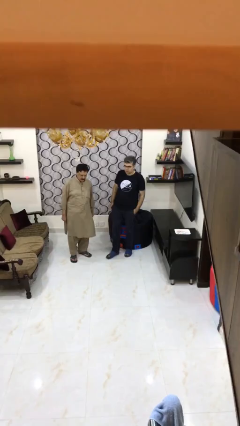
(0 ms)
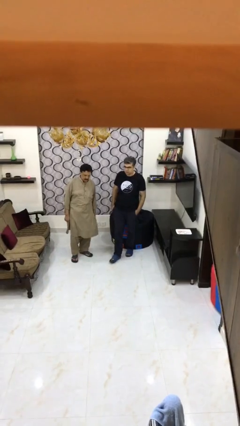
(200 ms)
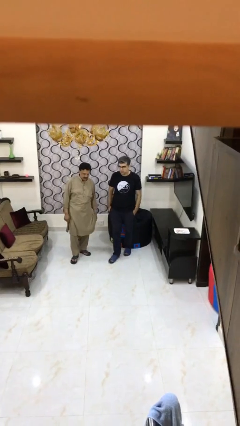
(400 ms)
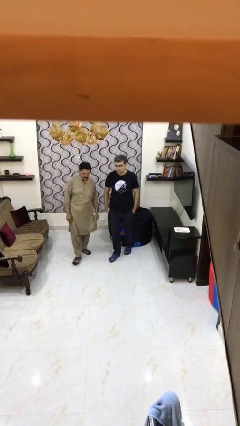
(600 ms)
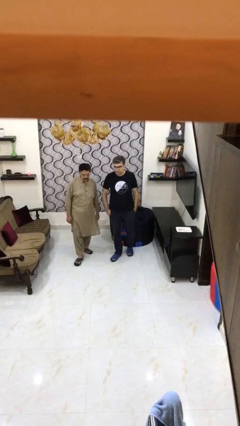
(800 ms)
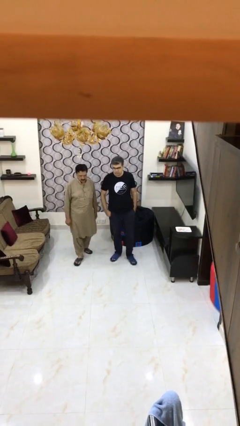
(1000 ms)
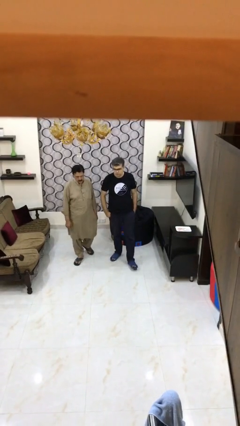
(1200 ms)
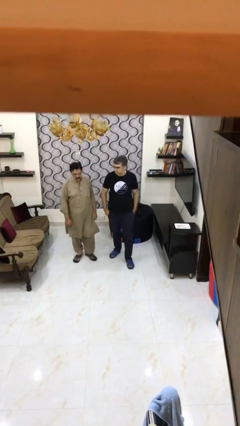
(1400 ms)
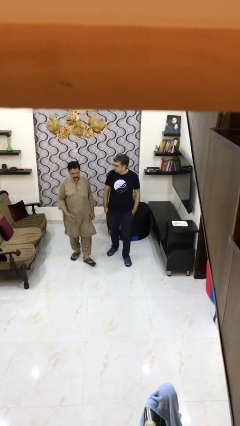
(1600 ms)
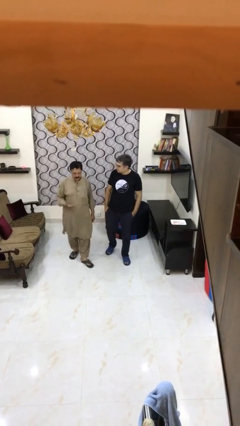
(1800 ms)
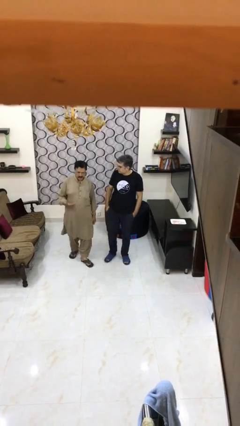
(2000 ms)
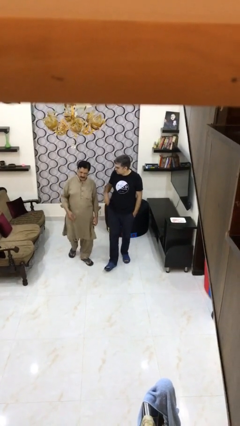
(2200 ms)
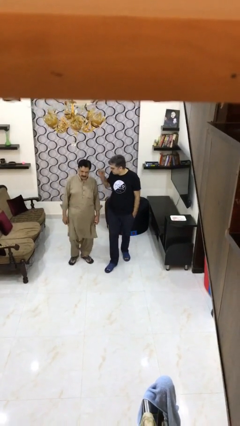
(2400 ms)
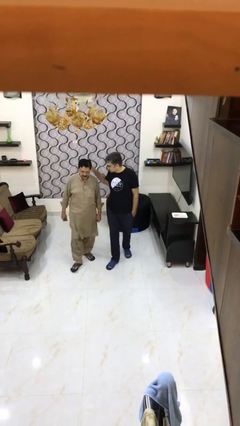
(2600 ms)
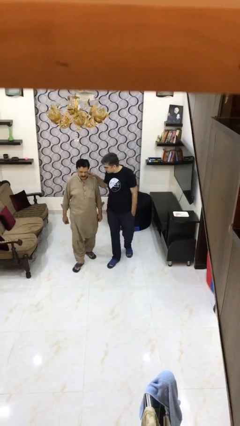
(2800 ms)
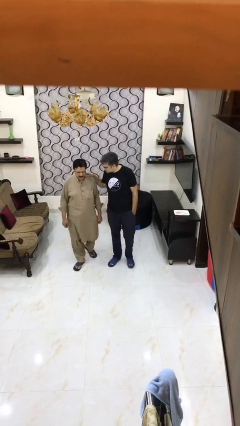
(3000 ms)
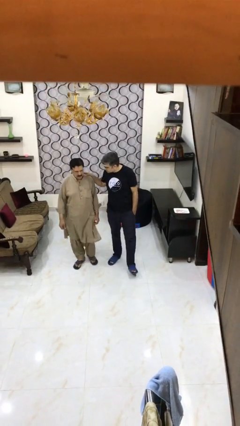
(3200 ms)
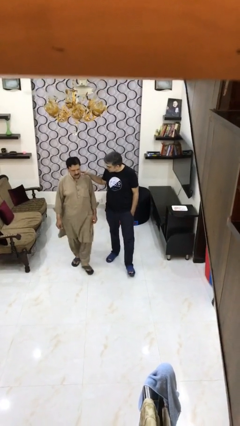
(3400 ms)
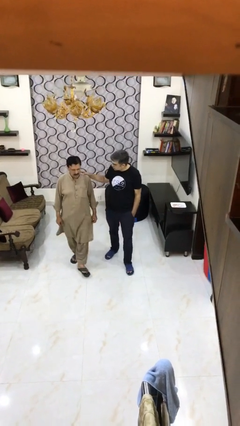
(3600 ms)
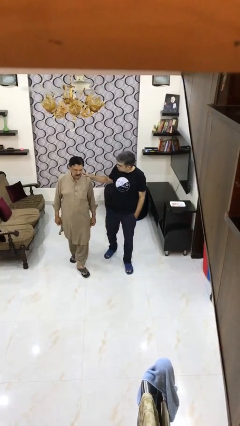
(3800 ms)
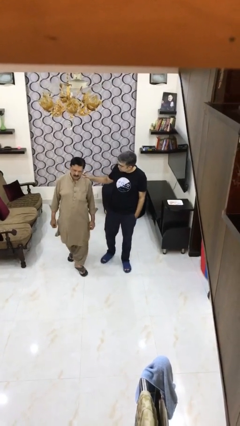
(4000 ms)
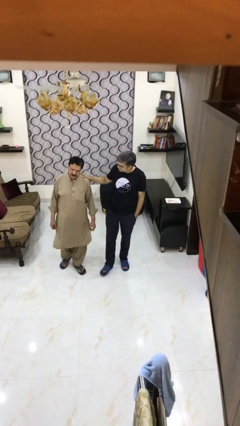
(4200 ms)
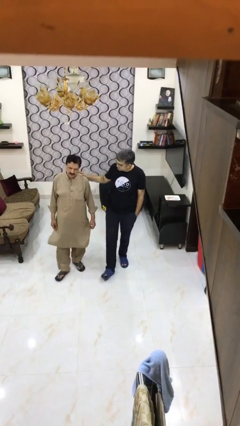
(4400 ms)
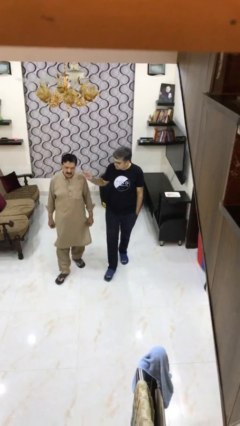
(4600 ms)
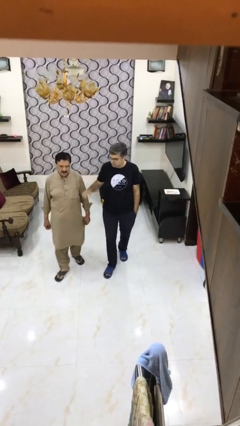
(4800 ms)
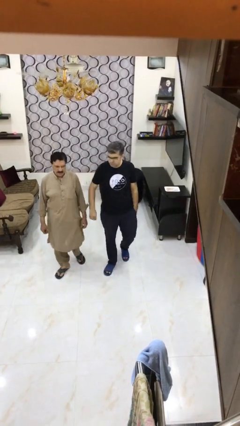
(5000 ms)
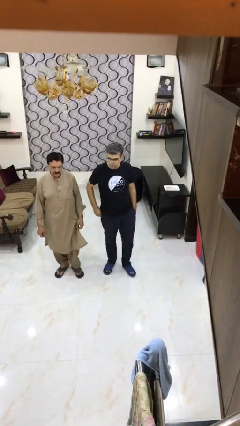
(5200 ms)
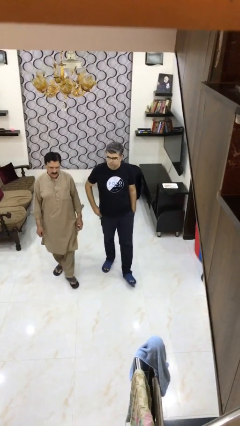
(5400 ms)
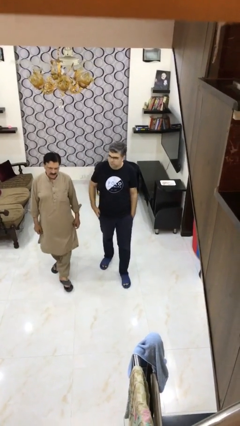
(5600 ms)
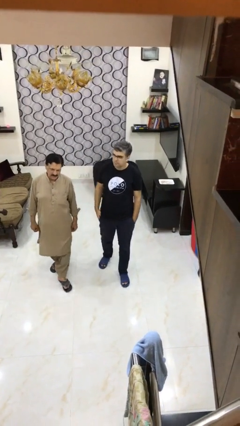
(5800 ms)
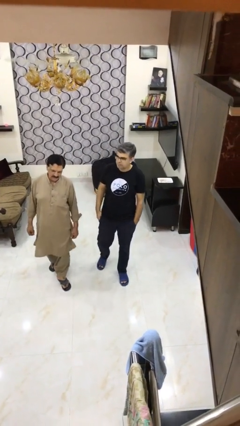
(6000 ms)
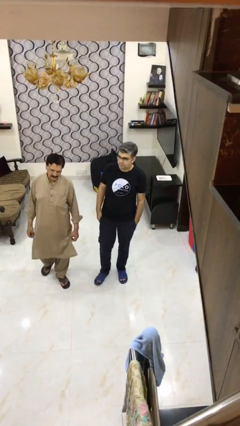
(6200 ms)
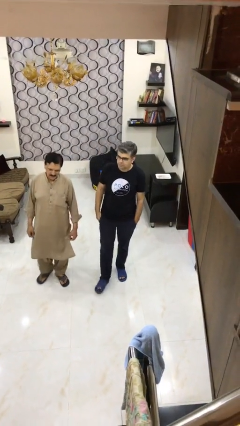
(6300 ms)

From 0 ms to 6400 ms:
person talks to person

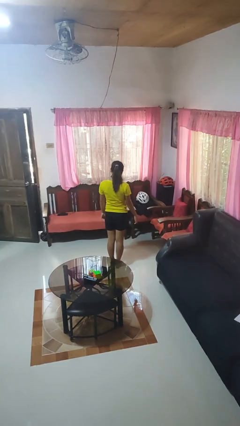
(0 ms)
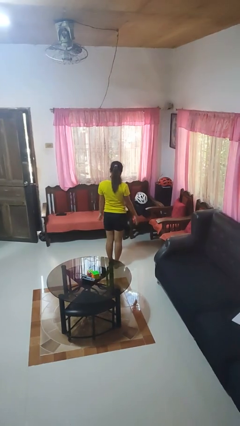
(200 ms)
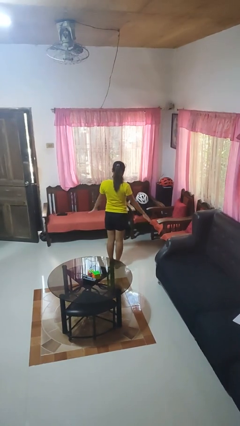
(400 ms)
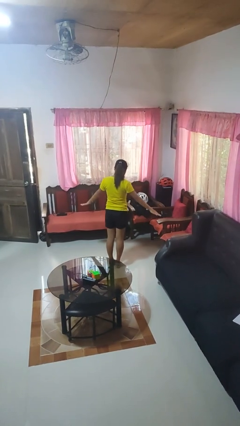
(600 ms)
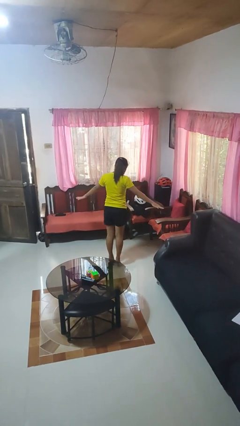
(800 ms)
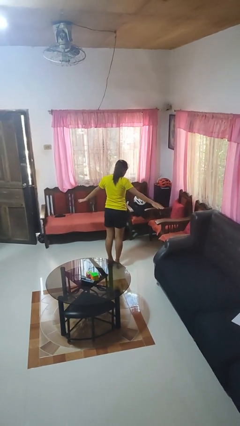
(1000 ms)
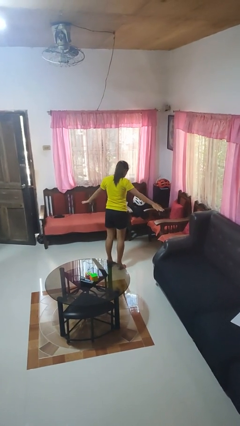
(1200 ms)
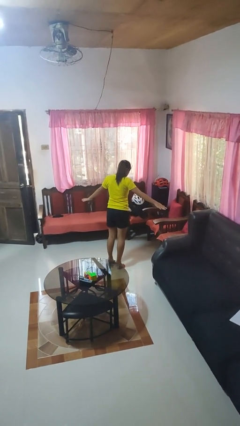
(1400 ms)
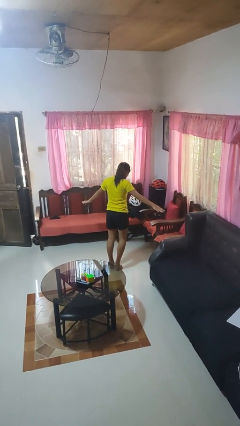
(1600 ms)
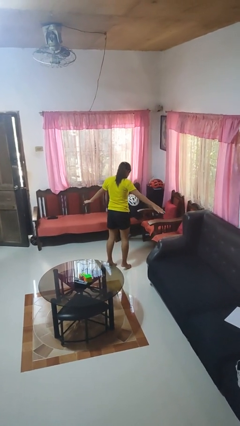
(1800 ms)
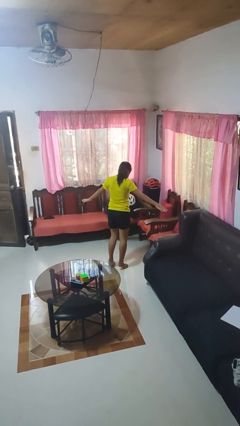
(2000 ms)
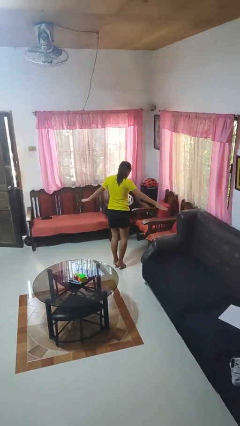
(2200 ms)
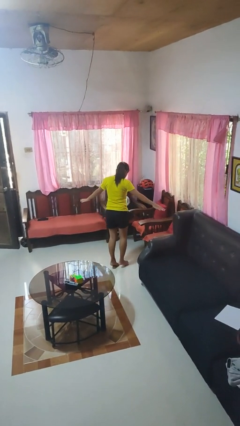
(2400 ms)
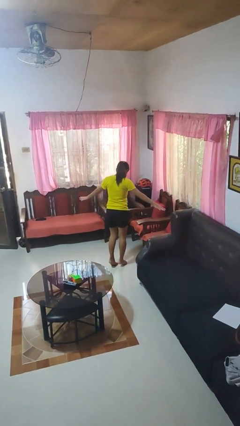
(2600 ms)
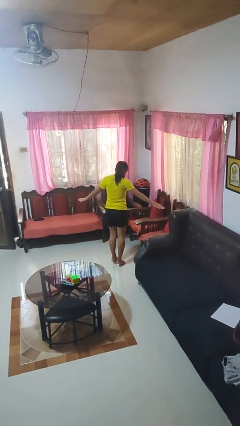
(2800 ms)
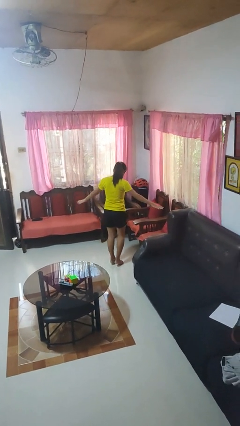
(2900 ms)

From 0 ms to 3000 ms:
person walks tiptoe

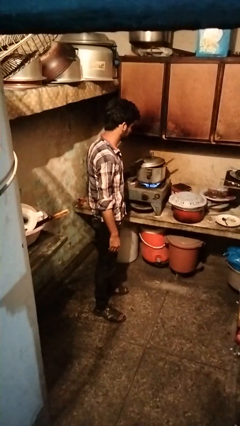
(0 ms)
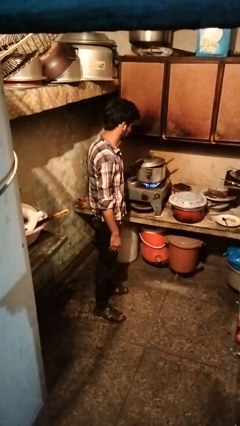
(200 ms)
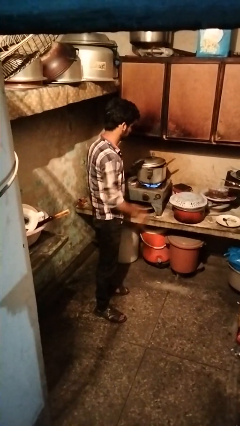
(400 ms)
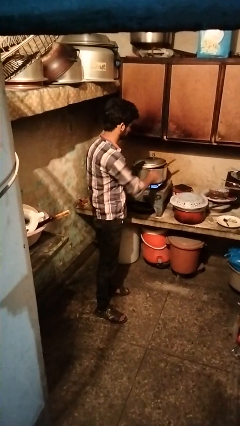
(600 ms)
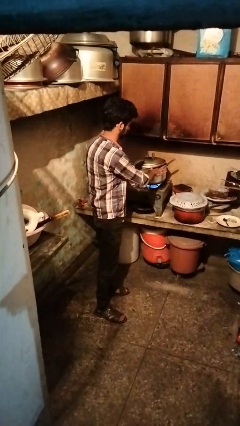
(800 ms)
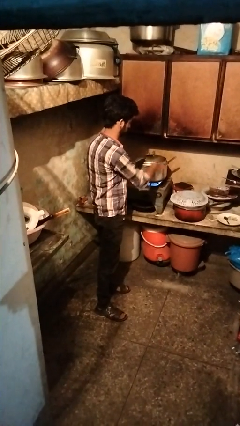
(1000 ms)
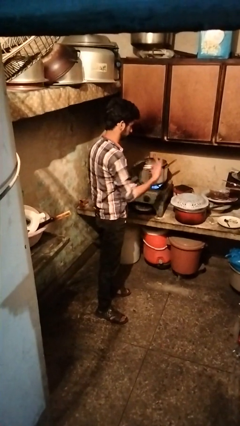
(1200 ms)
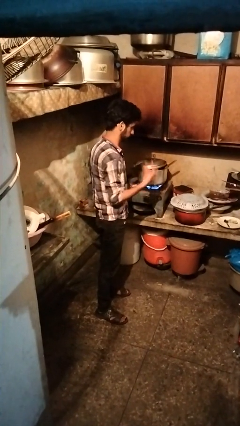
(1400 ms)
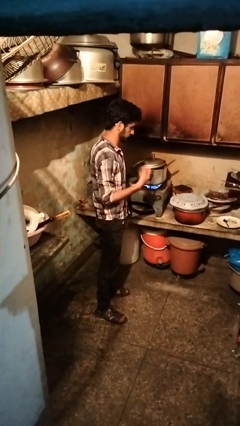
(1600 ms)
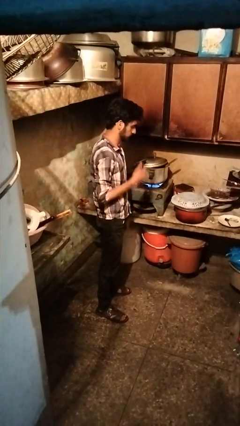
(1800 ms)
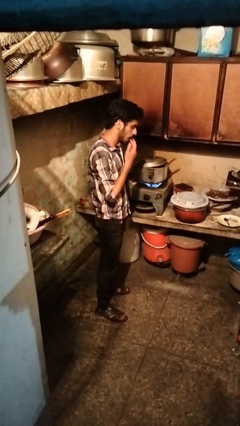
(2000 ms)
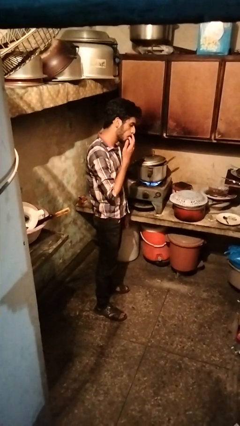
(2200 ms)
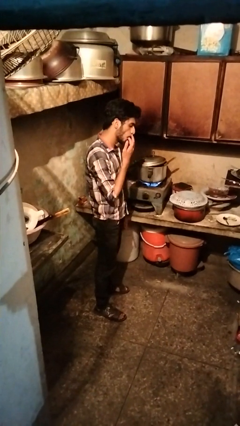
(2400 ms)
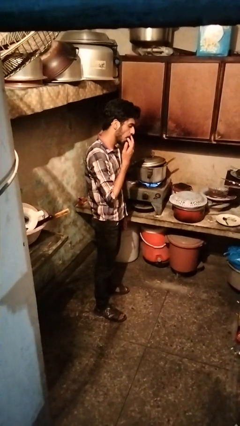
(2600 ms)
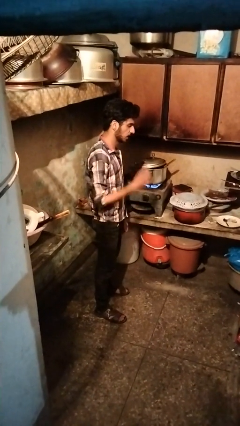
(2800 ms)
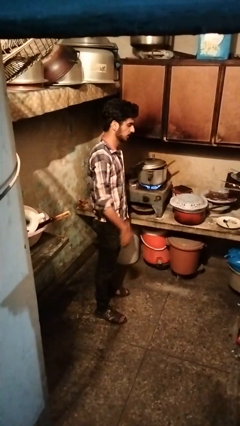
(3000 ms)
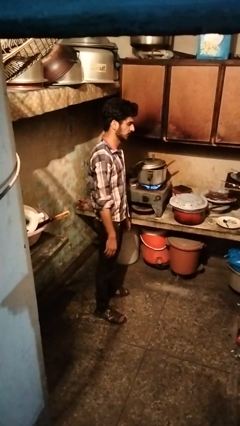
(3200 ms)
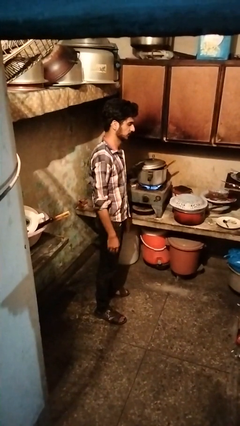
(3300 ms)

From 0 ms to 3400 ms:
person burns hand

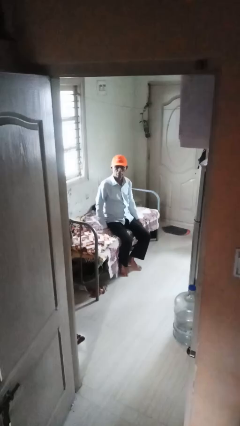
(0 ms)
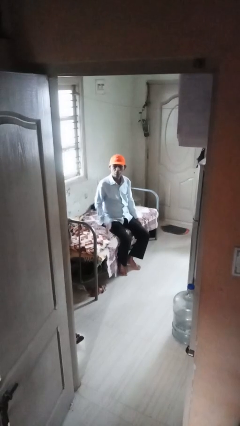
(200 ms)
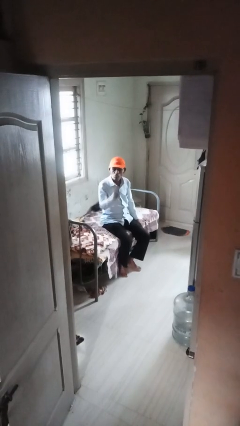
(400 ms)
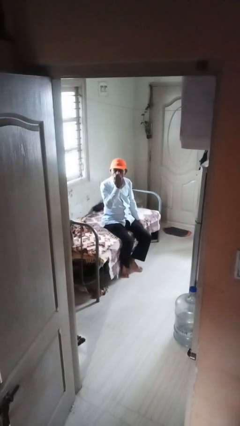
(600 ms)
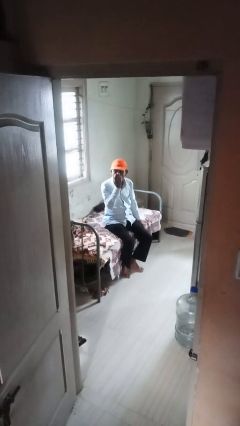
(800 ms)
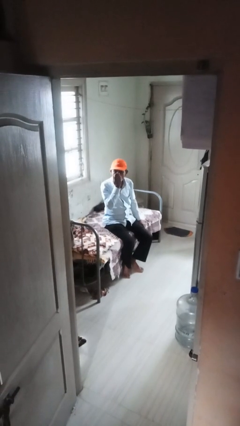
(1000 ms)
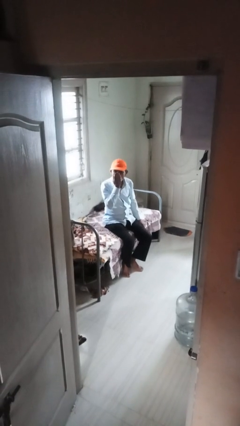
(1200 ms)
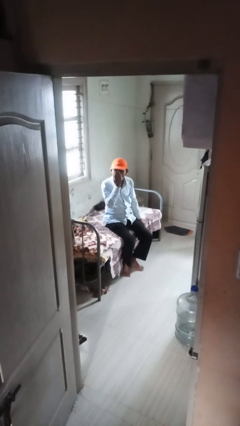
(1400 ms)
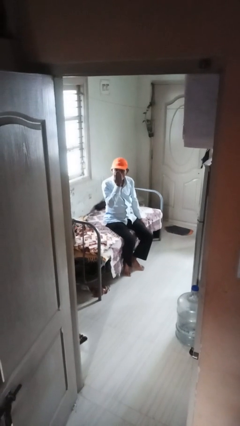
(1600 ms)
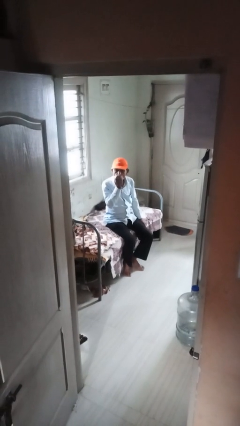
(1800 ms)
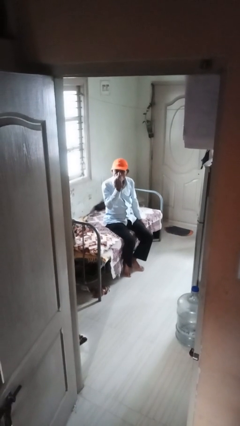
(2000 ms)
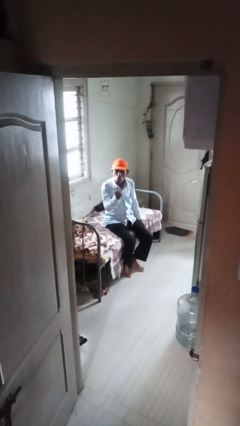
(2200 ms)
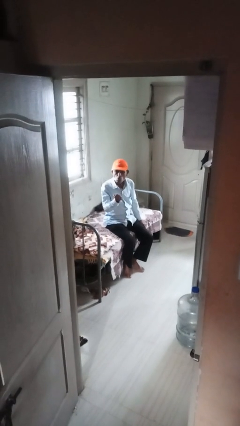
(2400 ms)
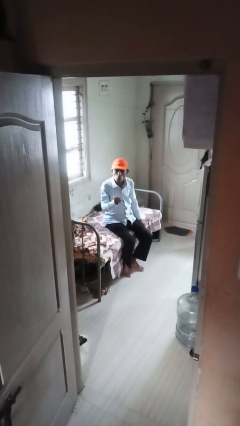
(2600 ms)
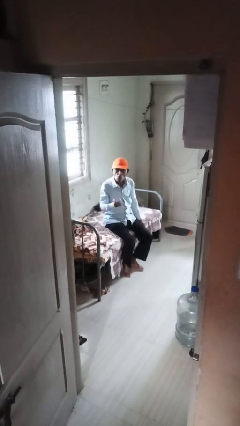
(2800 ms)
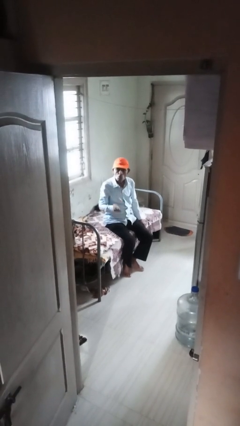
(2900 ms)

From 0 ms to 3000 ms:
person gestures blow kiss

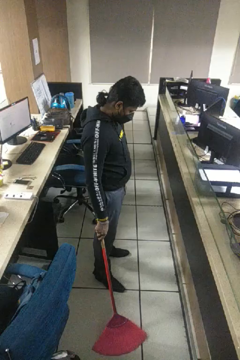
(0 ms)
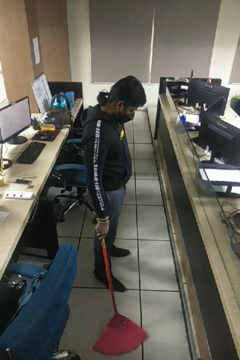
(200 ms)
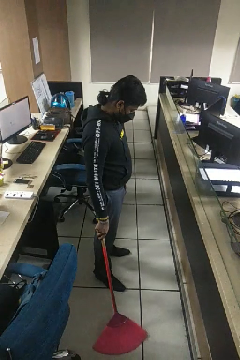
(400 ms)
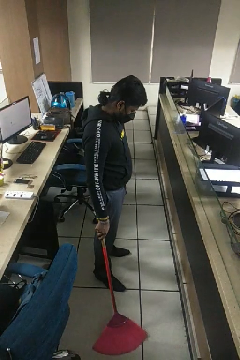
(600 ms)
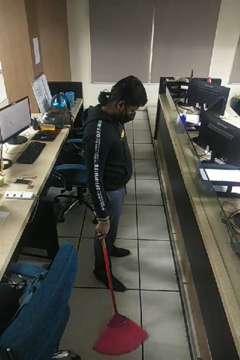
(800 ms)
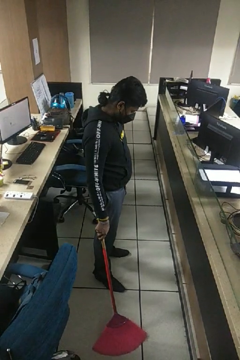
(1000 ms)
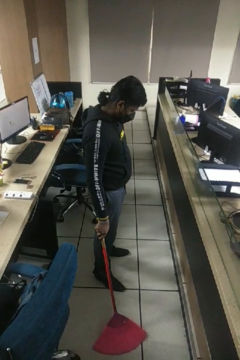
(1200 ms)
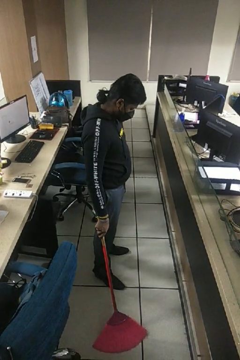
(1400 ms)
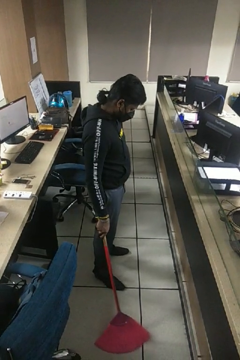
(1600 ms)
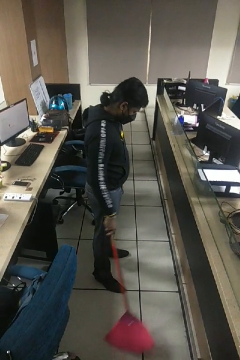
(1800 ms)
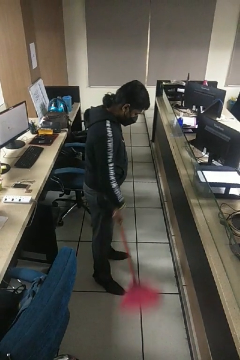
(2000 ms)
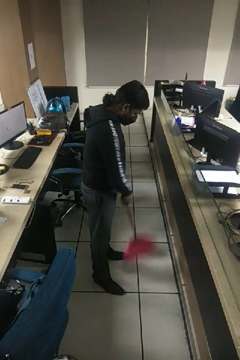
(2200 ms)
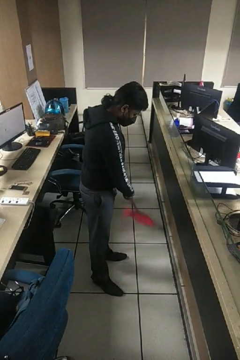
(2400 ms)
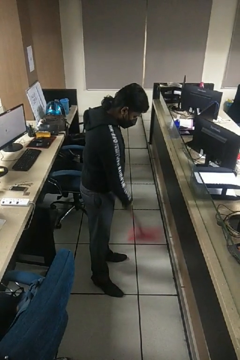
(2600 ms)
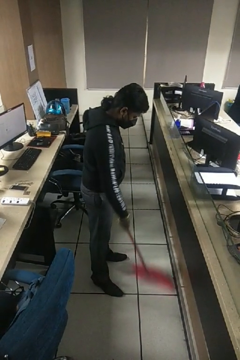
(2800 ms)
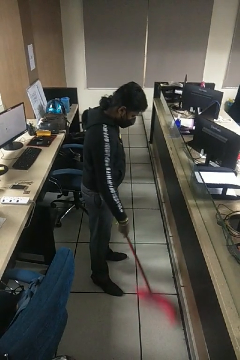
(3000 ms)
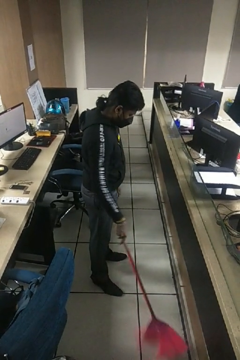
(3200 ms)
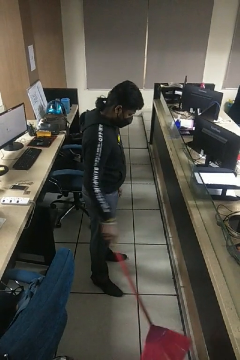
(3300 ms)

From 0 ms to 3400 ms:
person sweeps floor
